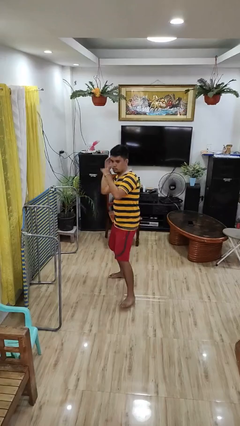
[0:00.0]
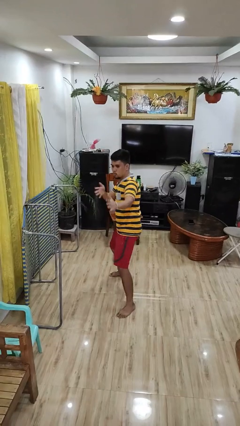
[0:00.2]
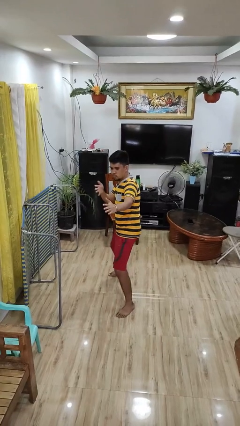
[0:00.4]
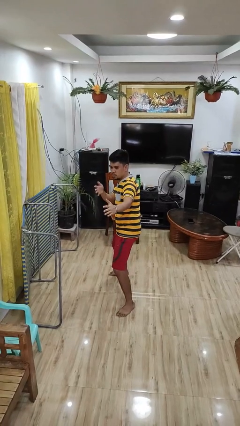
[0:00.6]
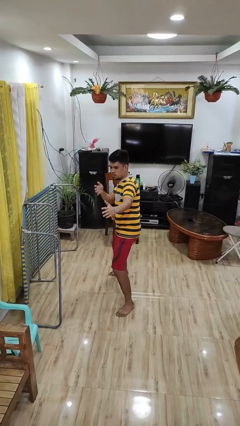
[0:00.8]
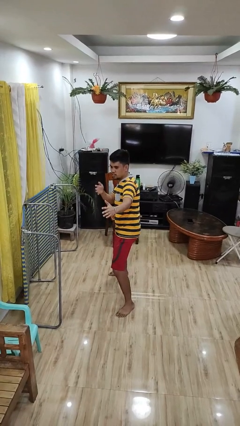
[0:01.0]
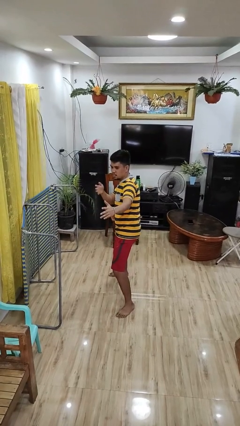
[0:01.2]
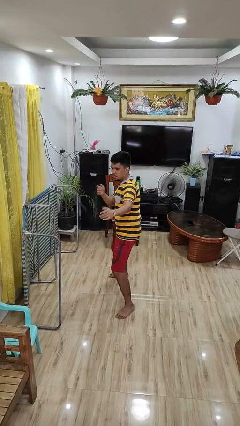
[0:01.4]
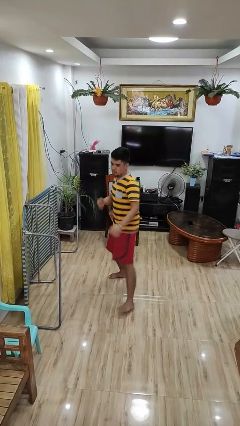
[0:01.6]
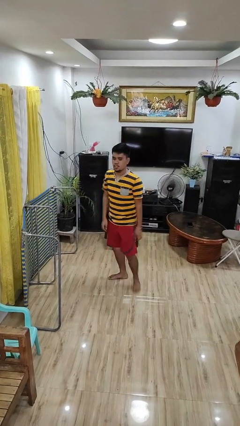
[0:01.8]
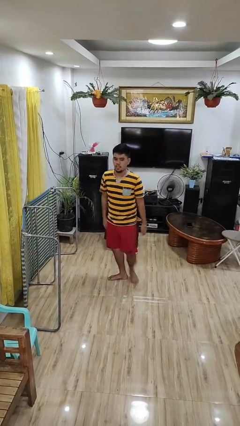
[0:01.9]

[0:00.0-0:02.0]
person karate chop

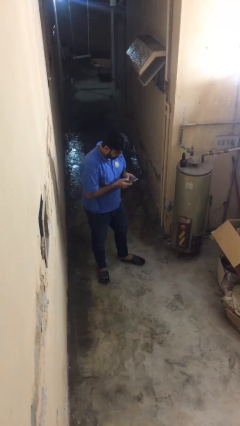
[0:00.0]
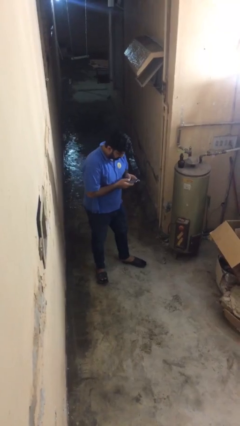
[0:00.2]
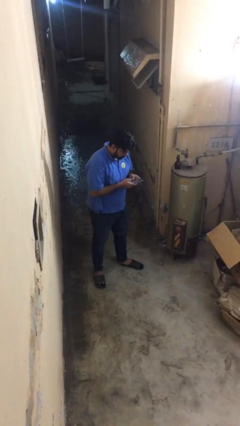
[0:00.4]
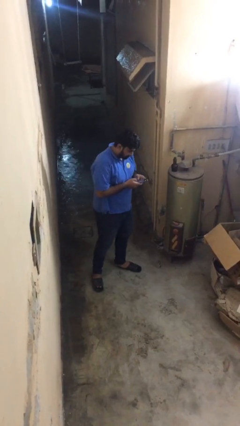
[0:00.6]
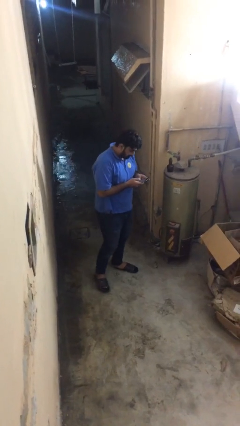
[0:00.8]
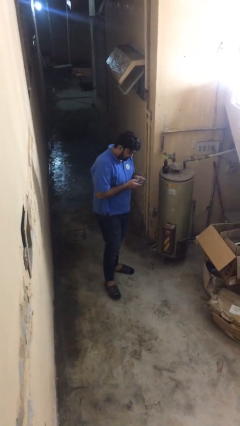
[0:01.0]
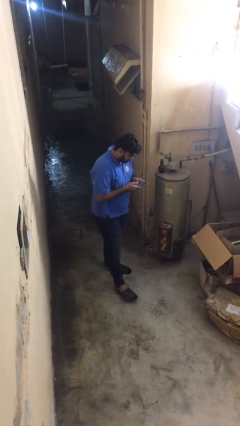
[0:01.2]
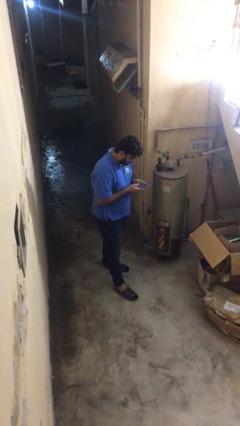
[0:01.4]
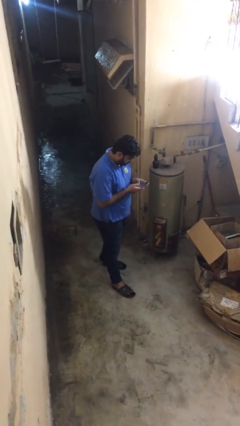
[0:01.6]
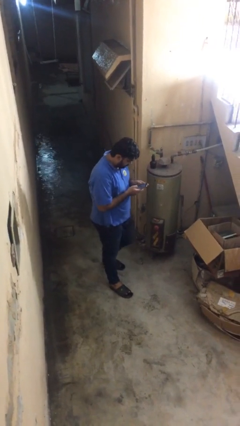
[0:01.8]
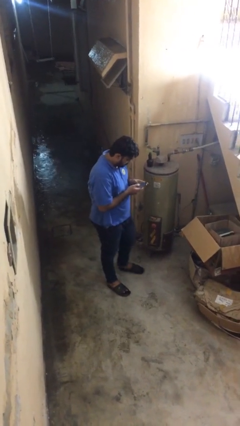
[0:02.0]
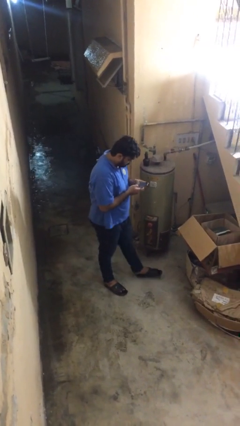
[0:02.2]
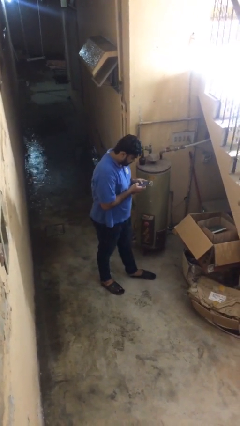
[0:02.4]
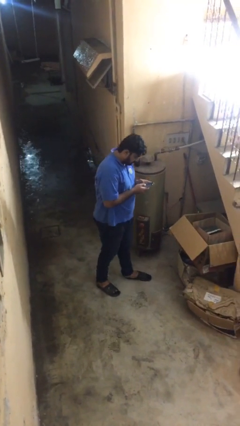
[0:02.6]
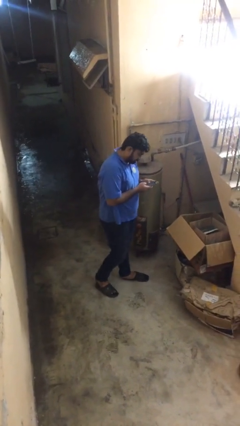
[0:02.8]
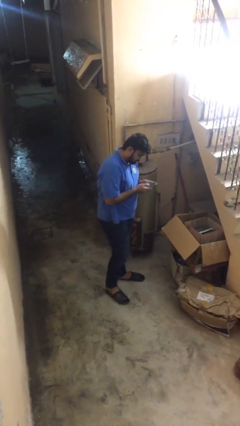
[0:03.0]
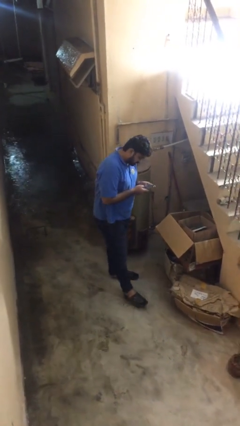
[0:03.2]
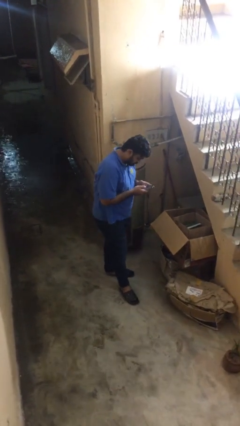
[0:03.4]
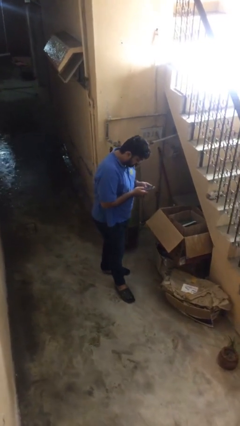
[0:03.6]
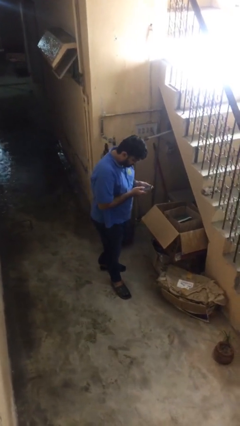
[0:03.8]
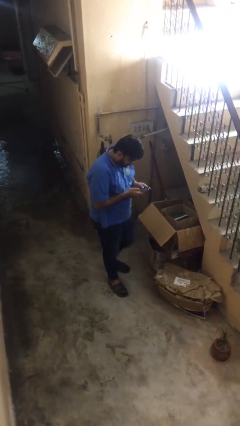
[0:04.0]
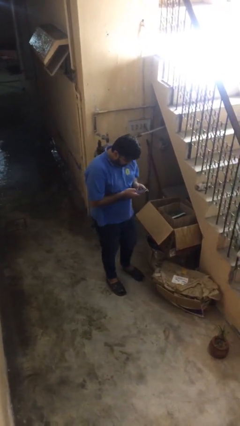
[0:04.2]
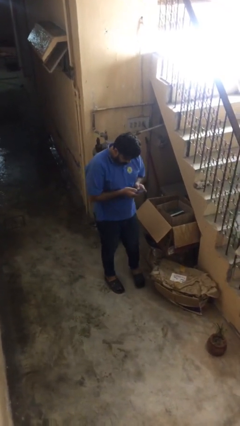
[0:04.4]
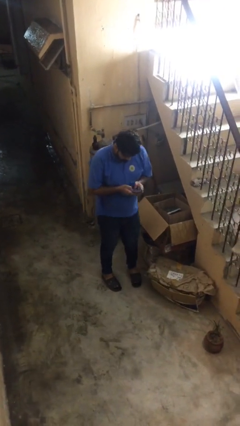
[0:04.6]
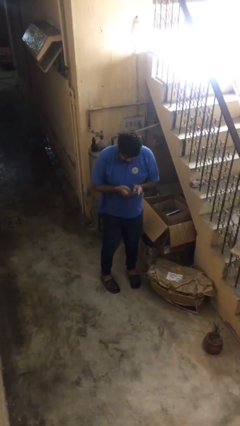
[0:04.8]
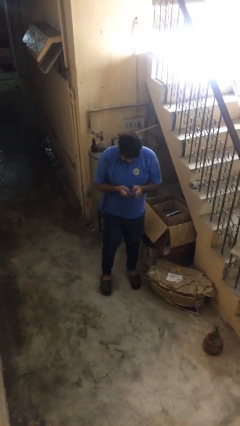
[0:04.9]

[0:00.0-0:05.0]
person texts on phone

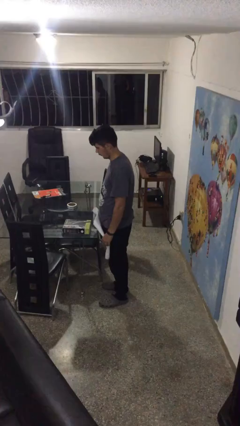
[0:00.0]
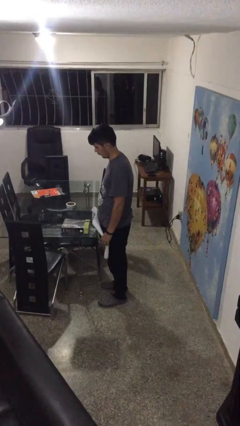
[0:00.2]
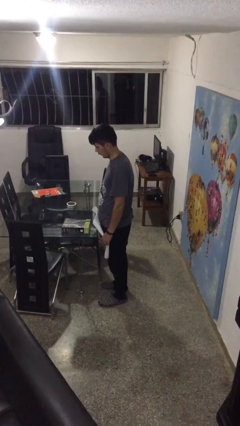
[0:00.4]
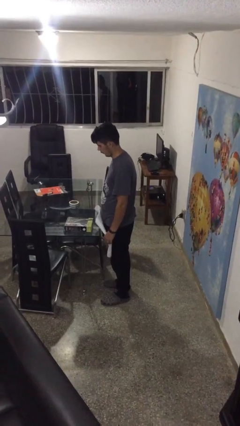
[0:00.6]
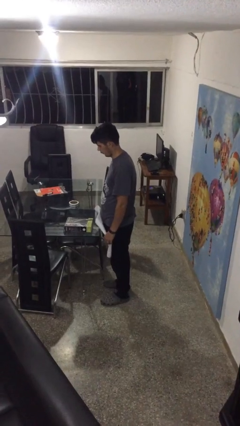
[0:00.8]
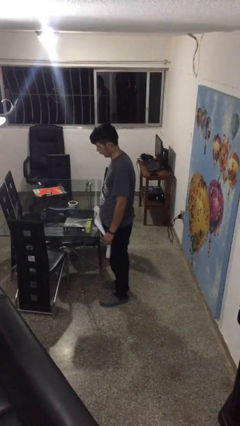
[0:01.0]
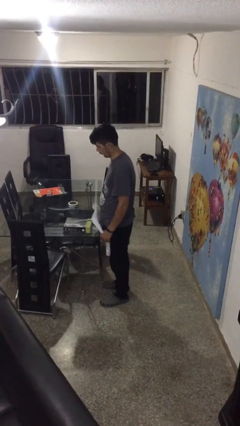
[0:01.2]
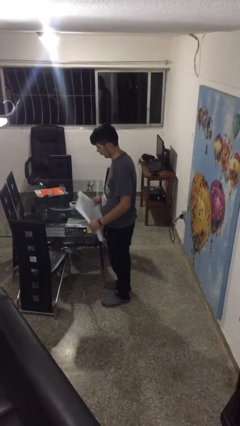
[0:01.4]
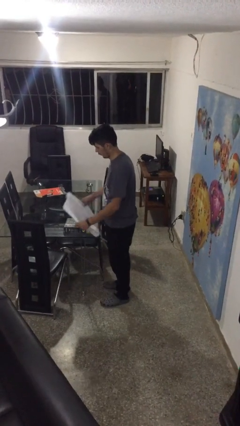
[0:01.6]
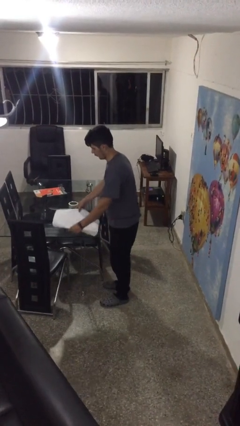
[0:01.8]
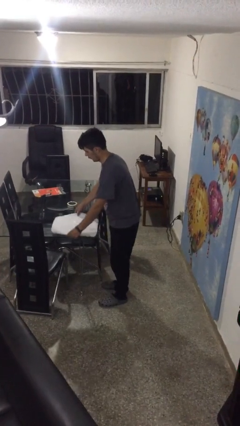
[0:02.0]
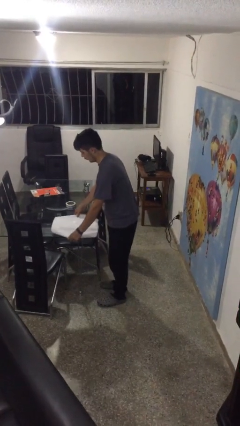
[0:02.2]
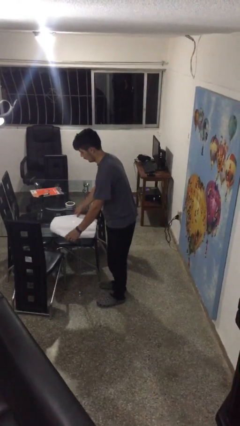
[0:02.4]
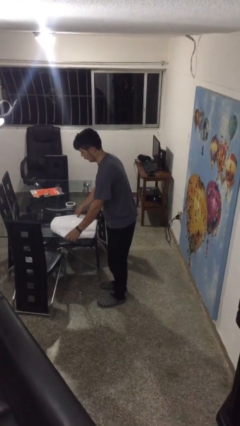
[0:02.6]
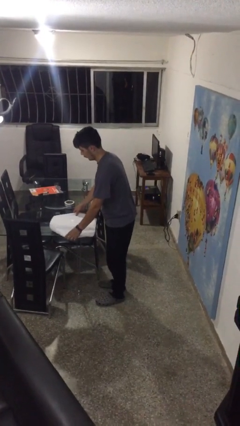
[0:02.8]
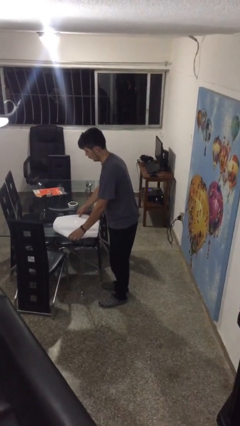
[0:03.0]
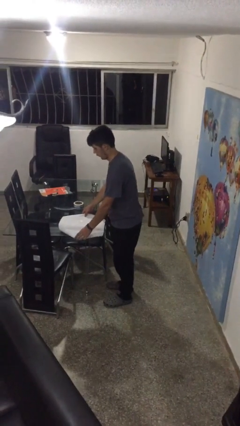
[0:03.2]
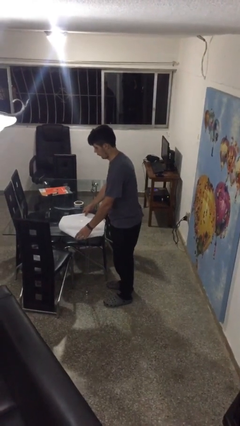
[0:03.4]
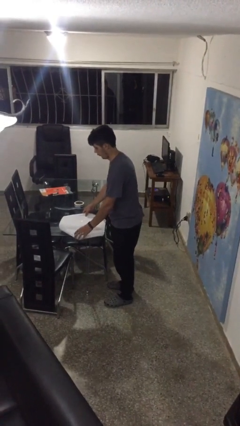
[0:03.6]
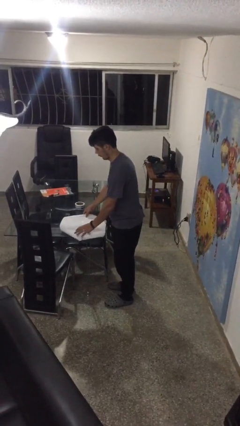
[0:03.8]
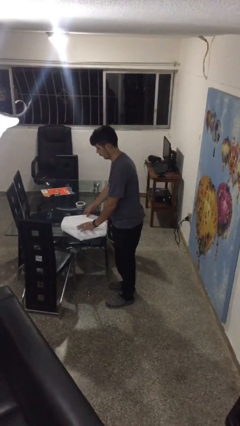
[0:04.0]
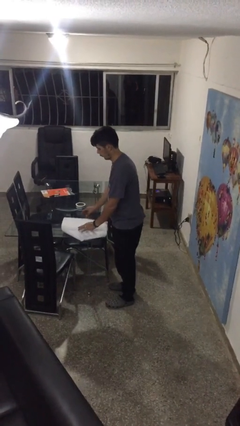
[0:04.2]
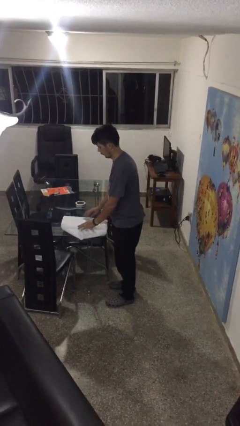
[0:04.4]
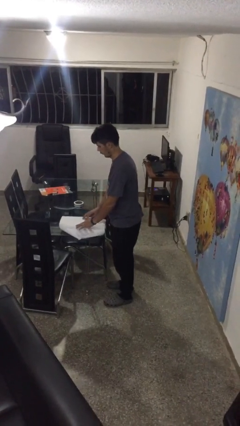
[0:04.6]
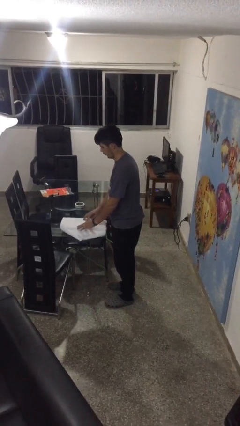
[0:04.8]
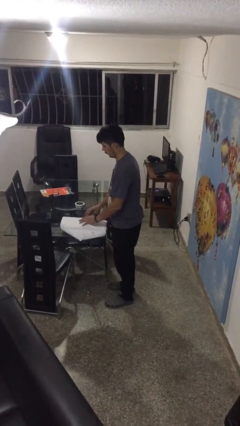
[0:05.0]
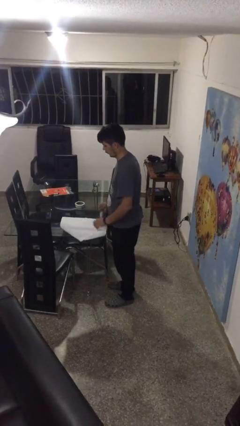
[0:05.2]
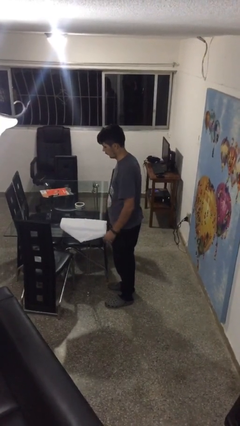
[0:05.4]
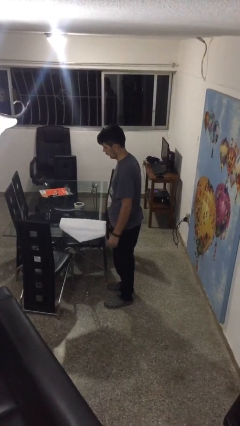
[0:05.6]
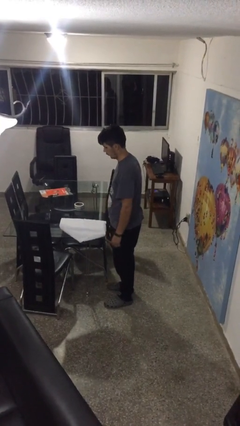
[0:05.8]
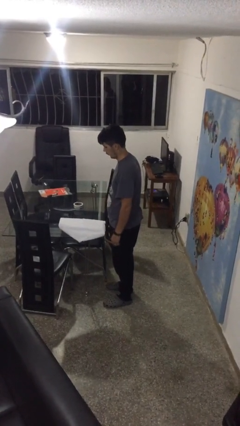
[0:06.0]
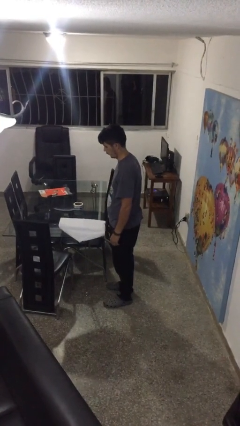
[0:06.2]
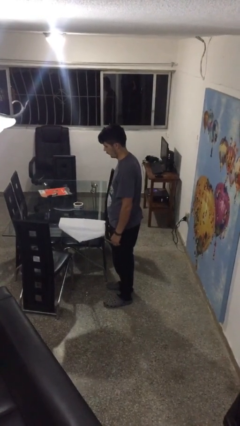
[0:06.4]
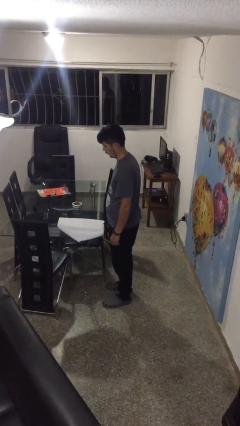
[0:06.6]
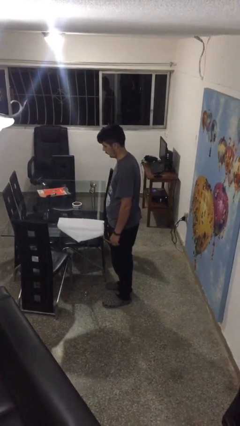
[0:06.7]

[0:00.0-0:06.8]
person wraps box

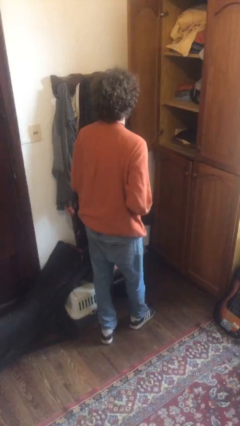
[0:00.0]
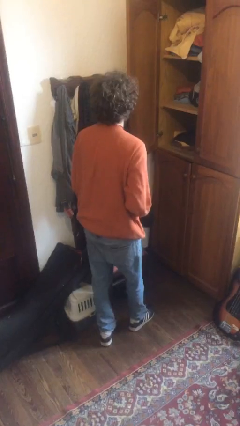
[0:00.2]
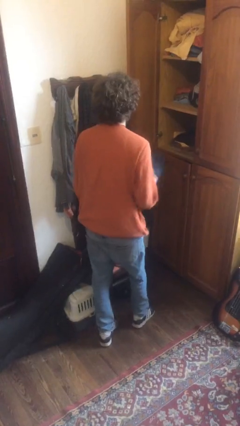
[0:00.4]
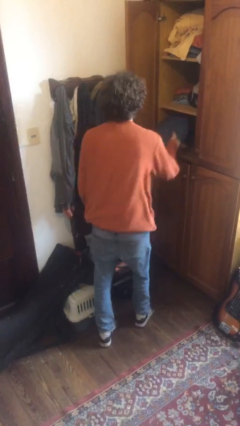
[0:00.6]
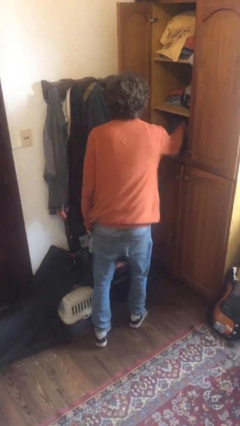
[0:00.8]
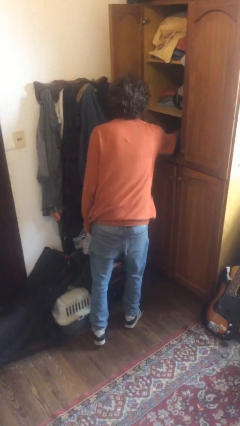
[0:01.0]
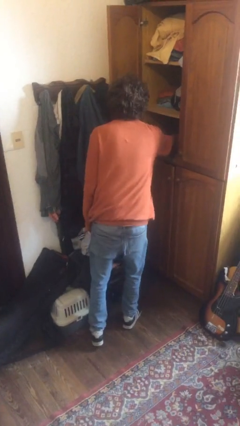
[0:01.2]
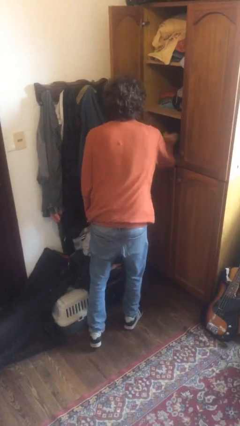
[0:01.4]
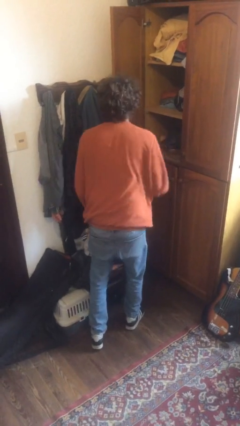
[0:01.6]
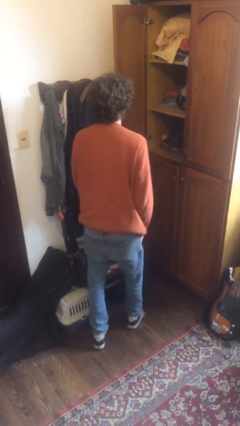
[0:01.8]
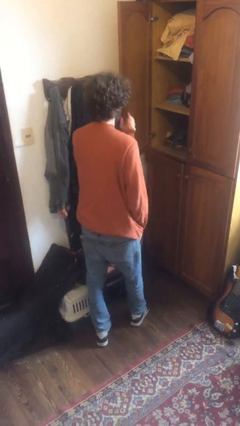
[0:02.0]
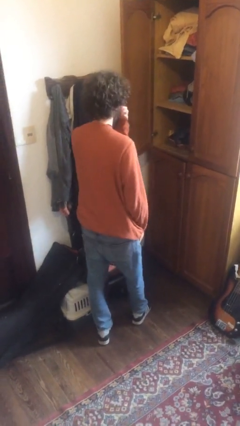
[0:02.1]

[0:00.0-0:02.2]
person puts clothes into dresser

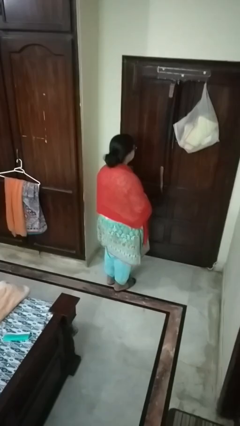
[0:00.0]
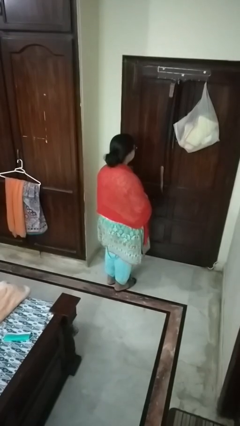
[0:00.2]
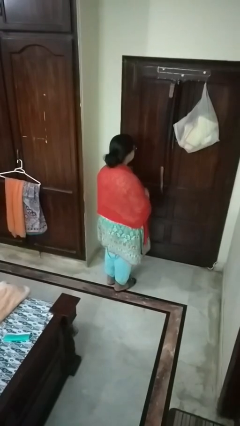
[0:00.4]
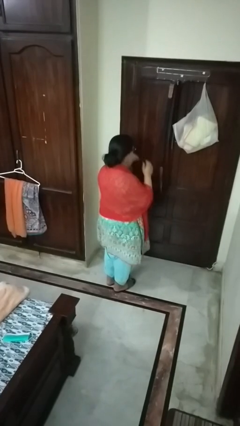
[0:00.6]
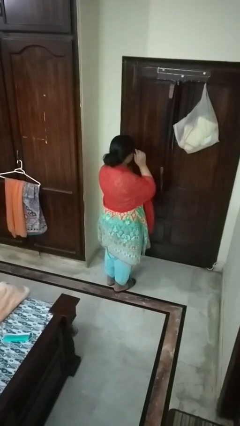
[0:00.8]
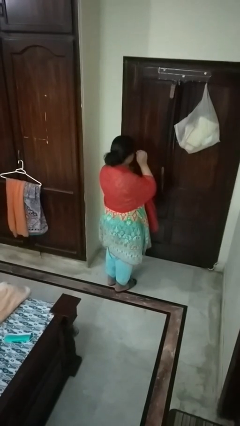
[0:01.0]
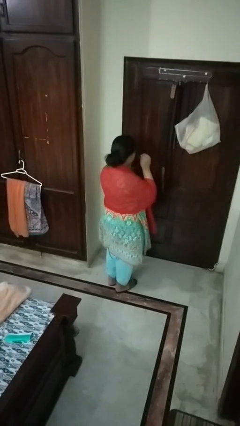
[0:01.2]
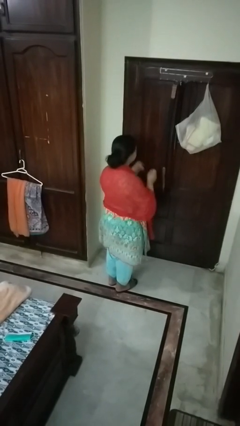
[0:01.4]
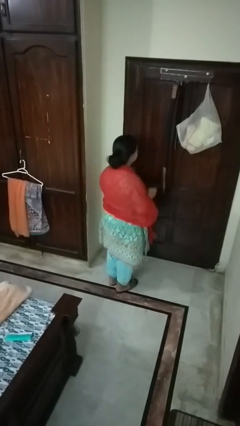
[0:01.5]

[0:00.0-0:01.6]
person takes off glasses
